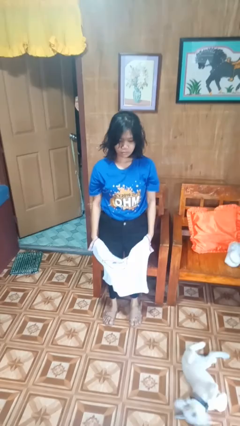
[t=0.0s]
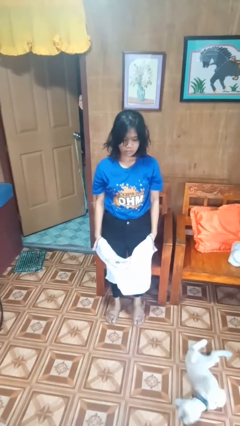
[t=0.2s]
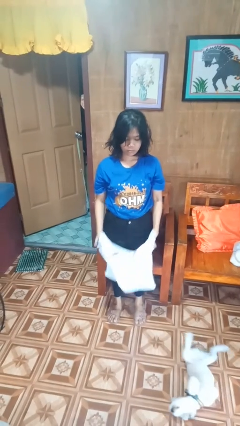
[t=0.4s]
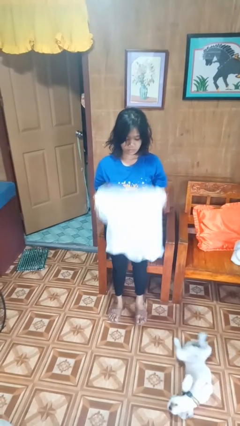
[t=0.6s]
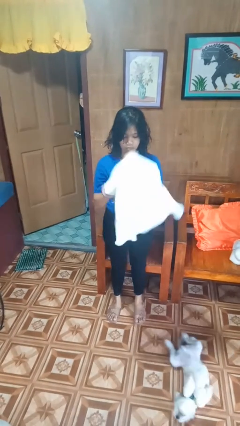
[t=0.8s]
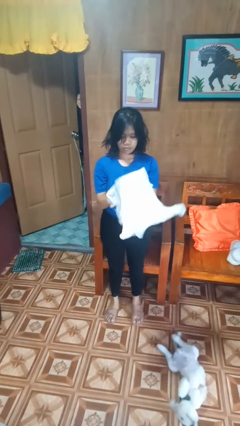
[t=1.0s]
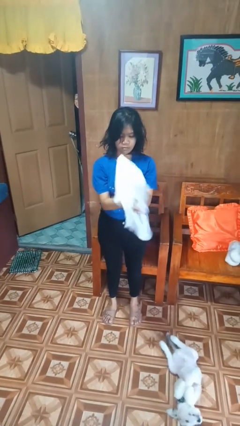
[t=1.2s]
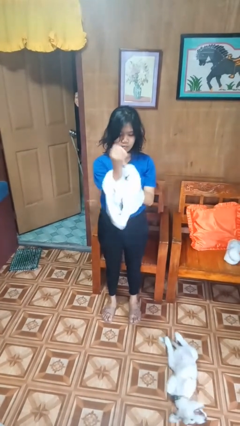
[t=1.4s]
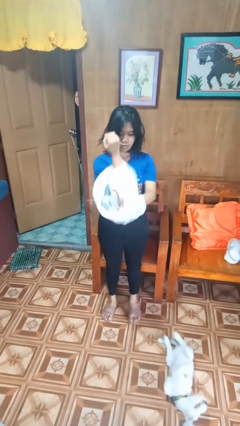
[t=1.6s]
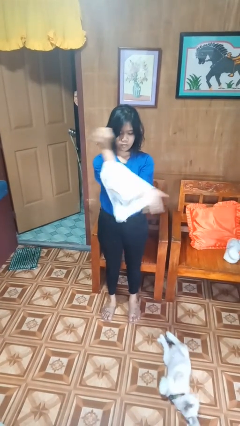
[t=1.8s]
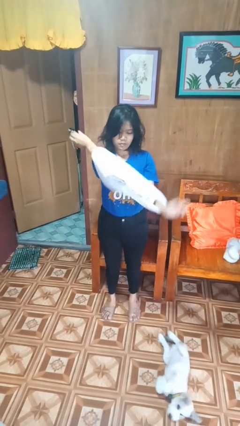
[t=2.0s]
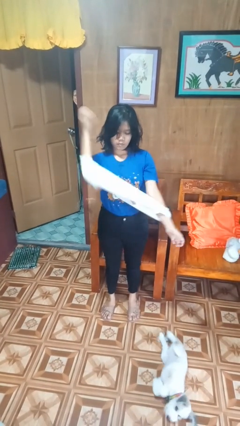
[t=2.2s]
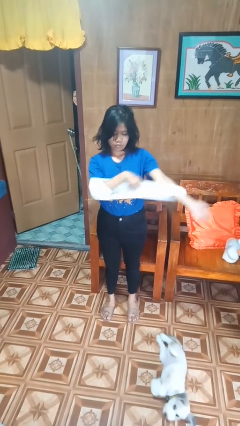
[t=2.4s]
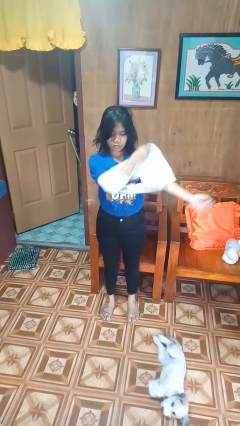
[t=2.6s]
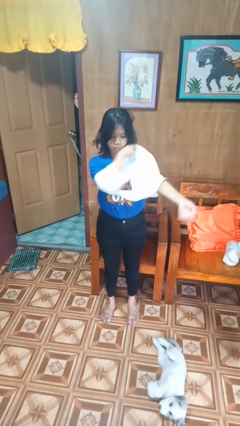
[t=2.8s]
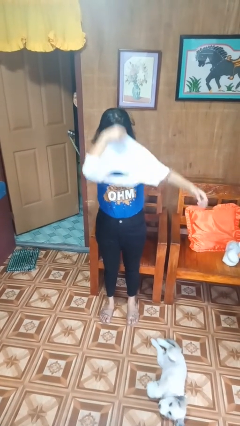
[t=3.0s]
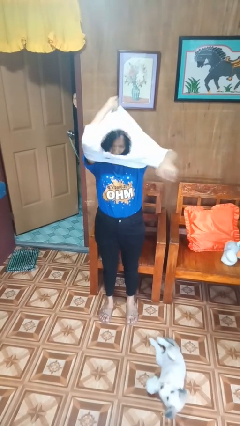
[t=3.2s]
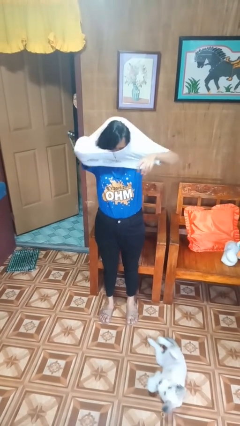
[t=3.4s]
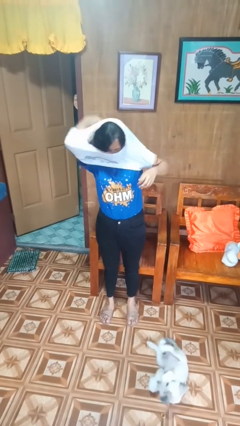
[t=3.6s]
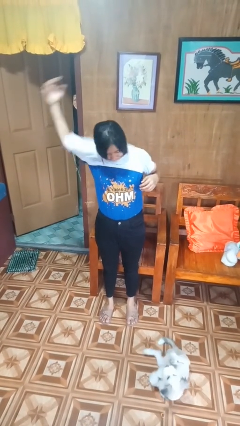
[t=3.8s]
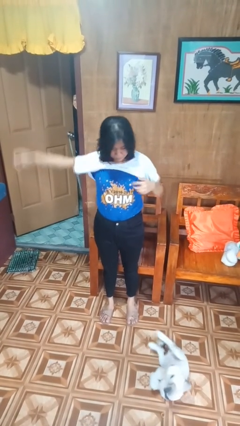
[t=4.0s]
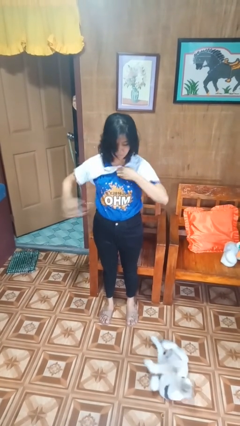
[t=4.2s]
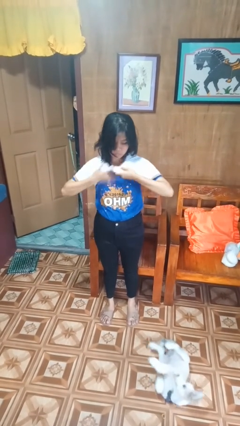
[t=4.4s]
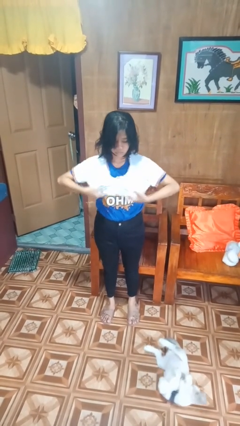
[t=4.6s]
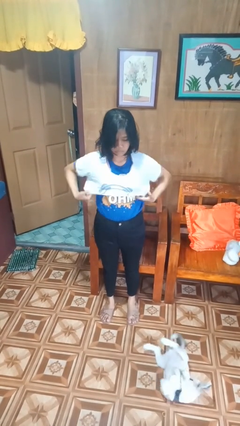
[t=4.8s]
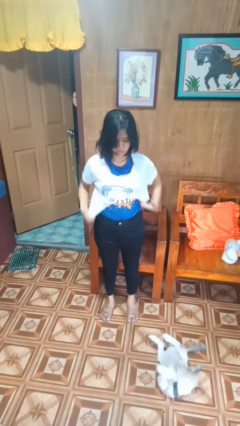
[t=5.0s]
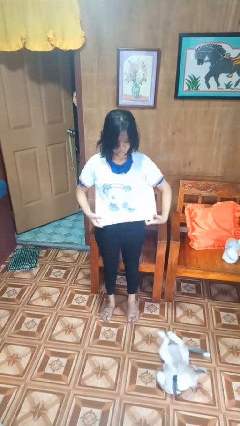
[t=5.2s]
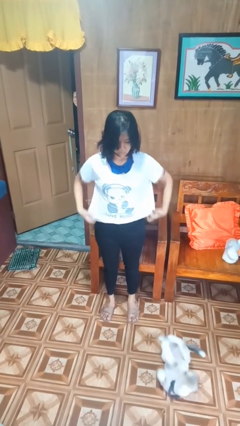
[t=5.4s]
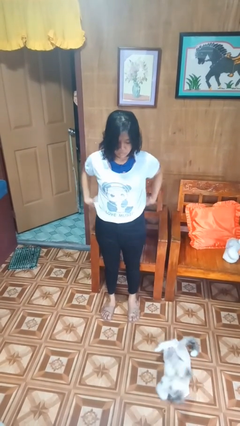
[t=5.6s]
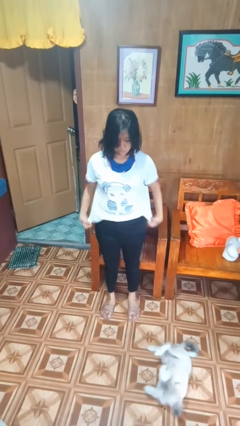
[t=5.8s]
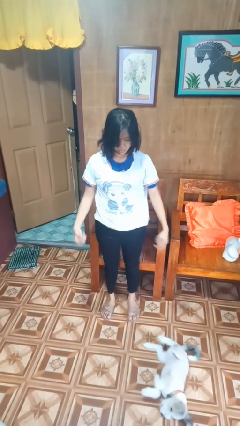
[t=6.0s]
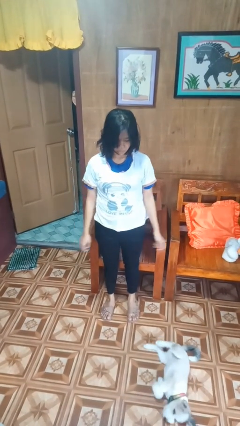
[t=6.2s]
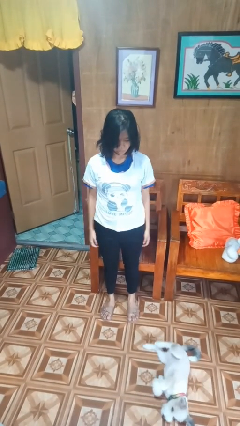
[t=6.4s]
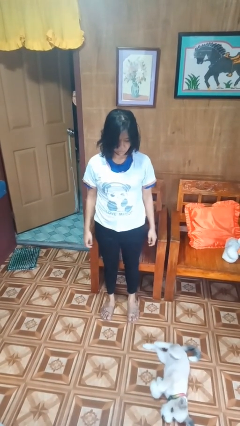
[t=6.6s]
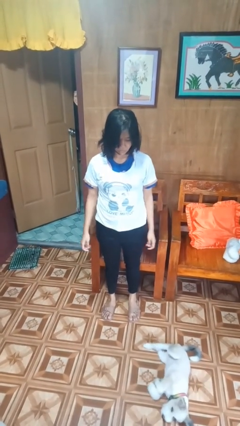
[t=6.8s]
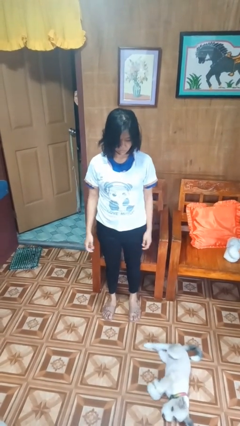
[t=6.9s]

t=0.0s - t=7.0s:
person puts on shirt

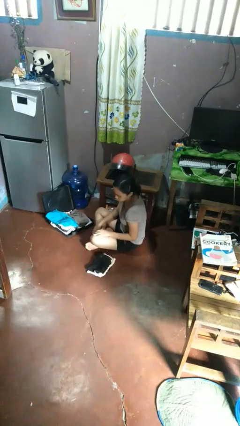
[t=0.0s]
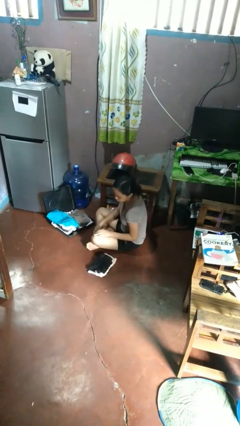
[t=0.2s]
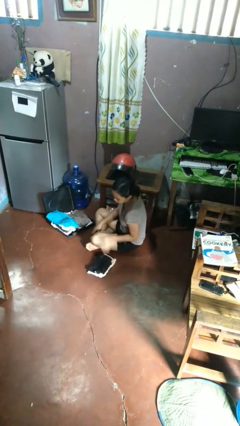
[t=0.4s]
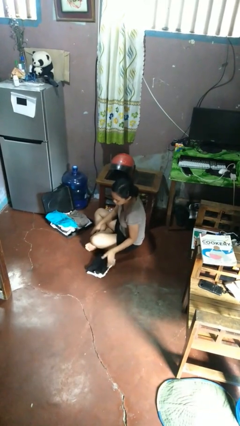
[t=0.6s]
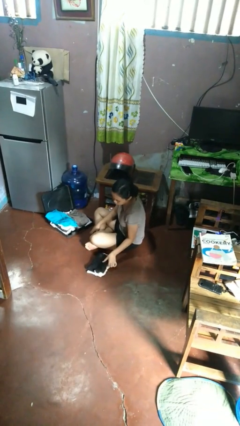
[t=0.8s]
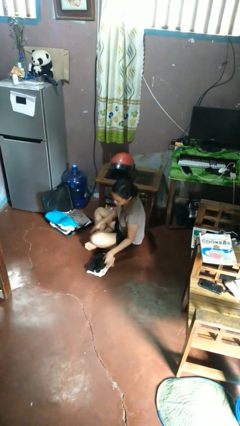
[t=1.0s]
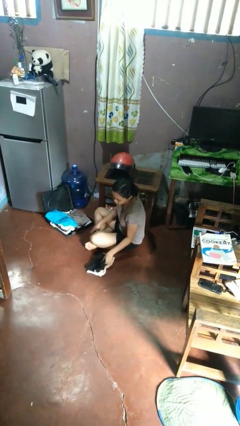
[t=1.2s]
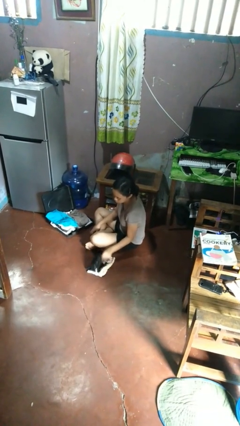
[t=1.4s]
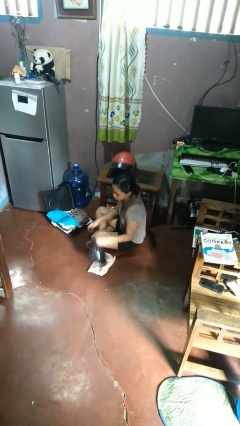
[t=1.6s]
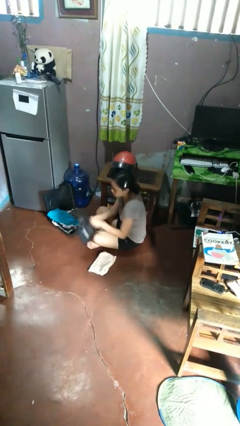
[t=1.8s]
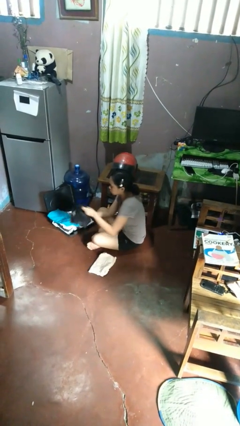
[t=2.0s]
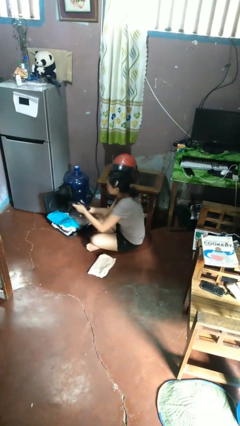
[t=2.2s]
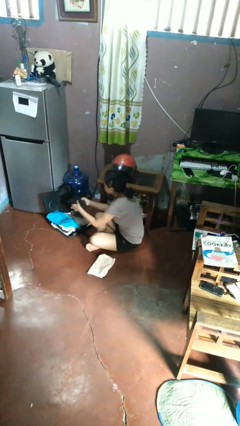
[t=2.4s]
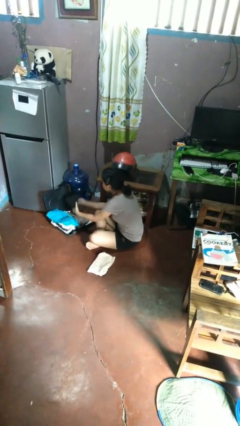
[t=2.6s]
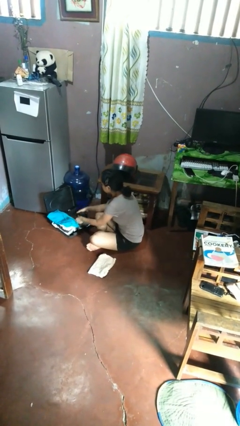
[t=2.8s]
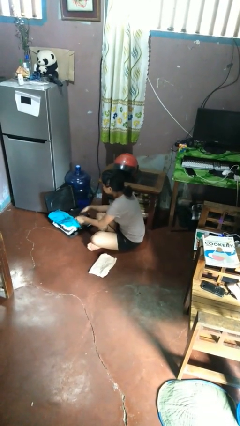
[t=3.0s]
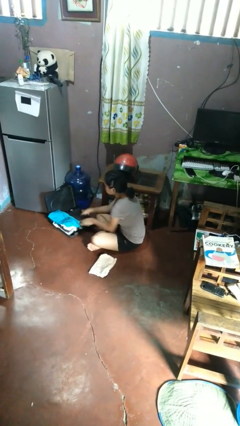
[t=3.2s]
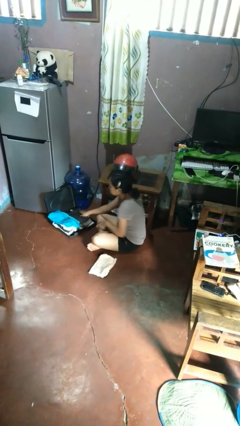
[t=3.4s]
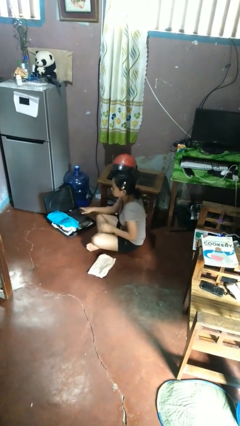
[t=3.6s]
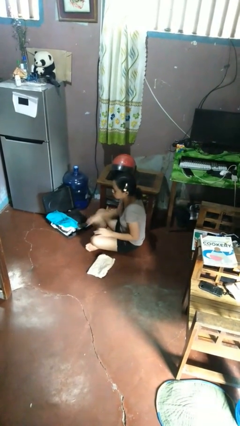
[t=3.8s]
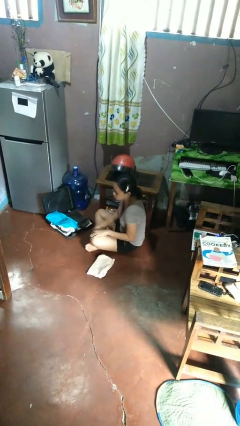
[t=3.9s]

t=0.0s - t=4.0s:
person loads clothes into suitcase

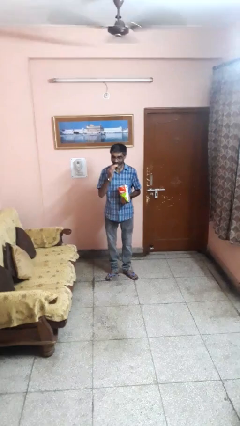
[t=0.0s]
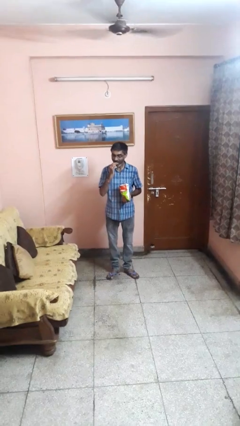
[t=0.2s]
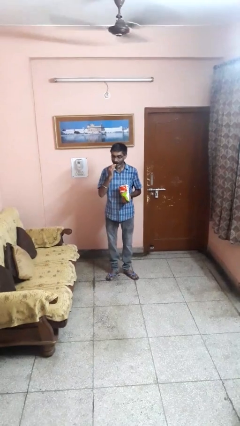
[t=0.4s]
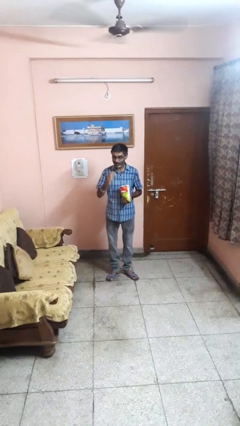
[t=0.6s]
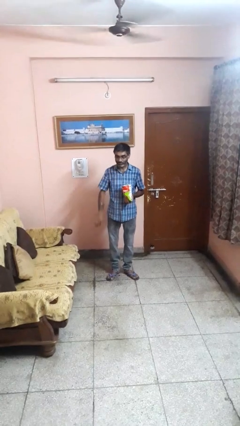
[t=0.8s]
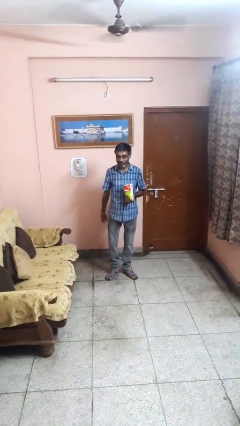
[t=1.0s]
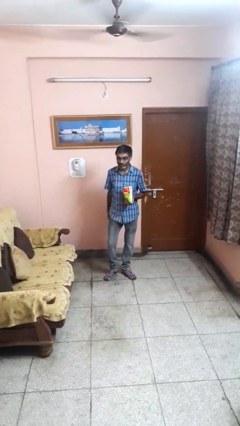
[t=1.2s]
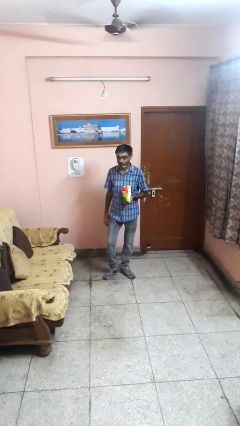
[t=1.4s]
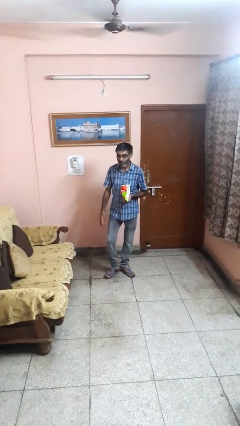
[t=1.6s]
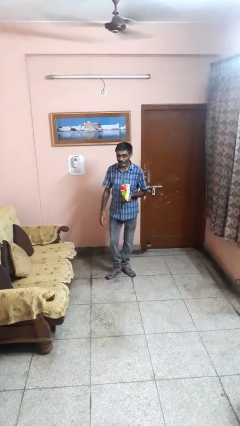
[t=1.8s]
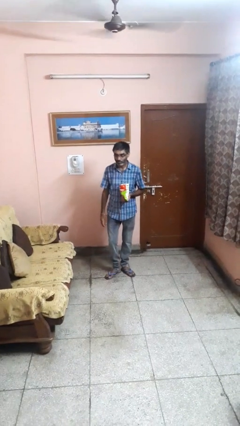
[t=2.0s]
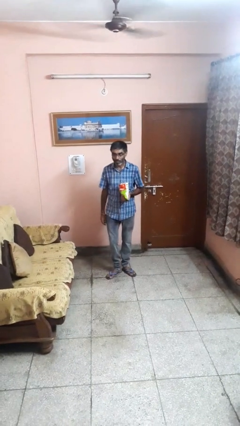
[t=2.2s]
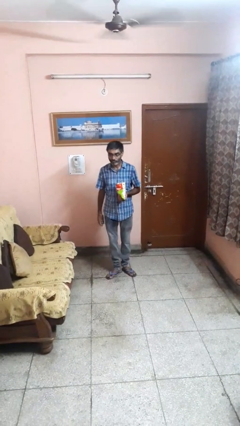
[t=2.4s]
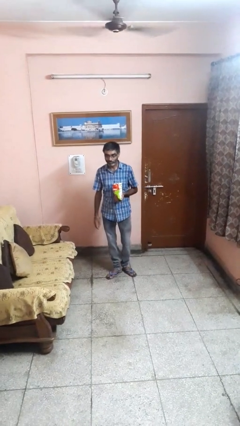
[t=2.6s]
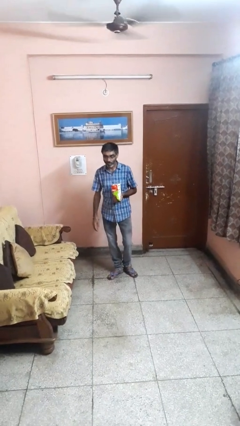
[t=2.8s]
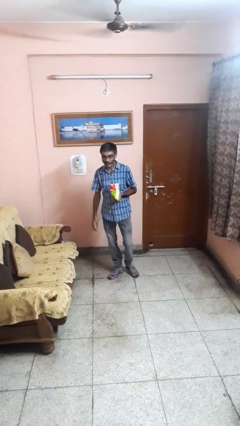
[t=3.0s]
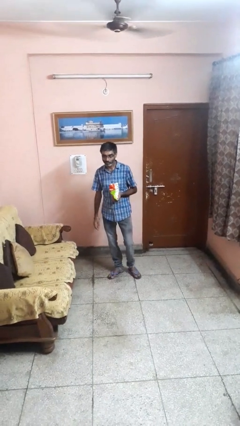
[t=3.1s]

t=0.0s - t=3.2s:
person eats snack from bag

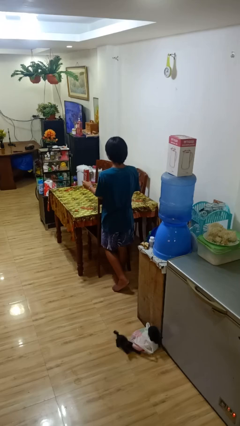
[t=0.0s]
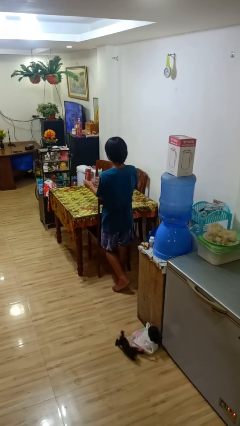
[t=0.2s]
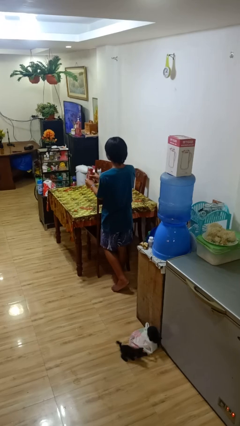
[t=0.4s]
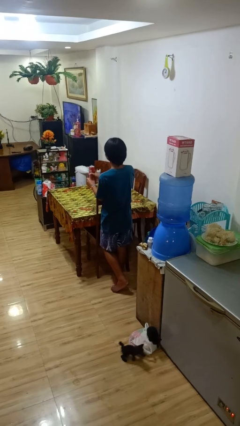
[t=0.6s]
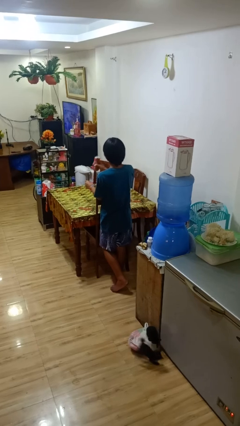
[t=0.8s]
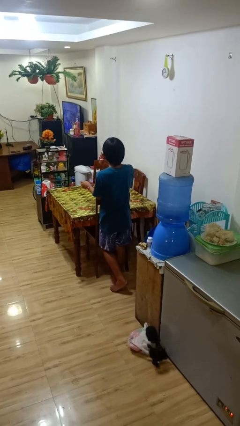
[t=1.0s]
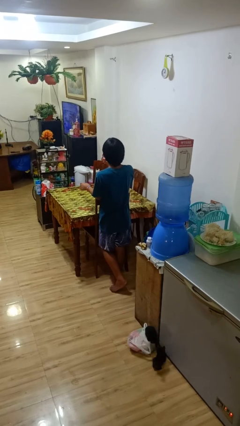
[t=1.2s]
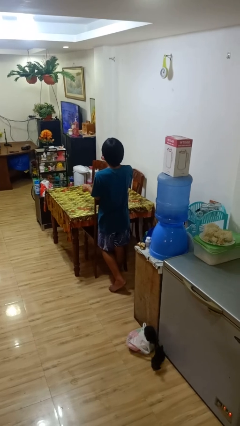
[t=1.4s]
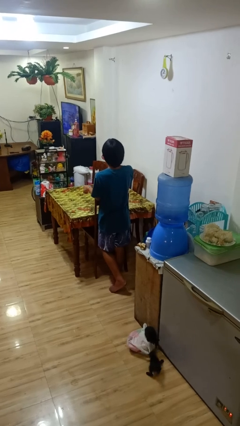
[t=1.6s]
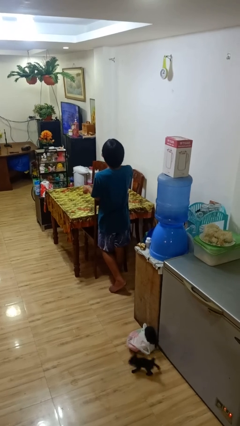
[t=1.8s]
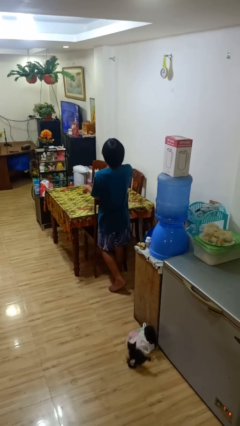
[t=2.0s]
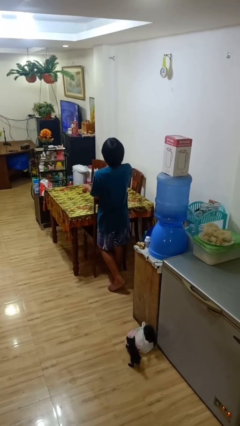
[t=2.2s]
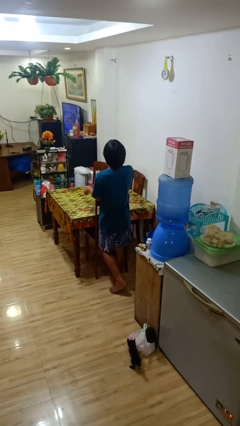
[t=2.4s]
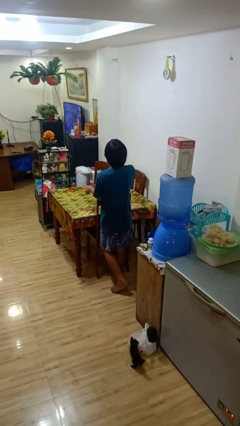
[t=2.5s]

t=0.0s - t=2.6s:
person drinks from beverage can

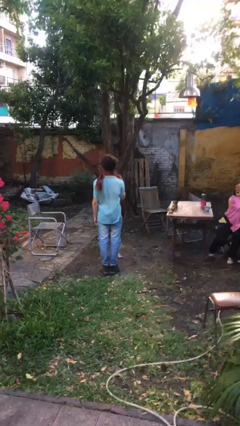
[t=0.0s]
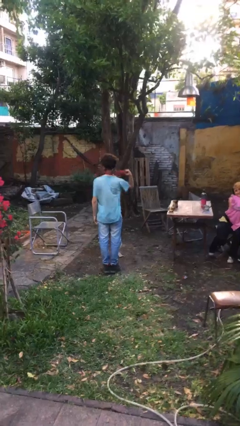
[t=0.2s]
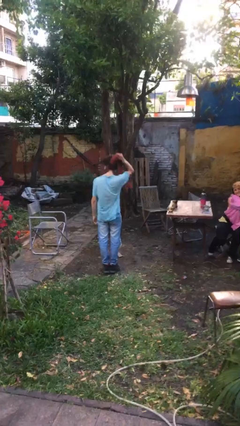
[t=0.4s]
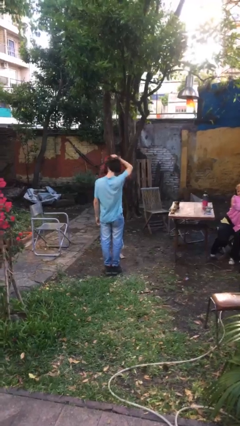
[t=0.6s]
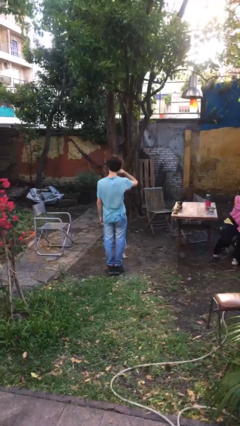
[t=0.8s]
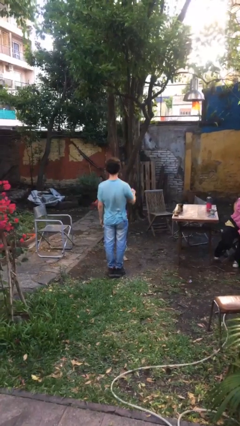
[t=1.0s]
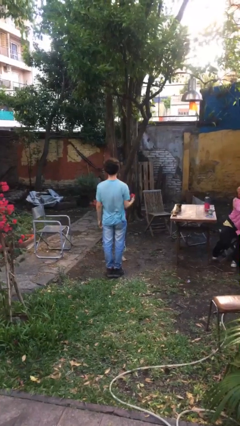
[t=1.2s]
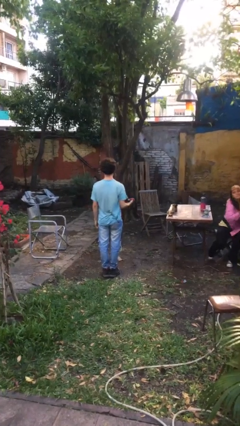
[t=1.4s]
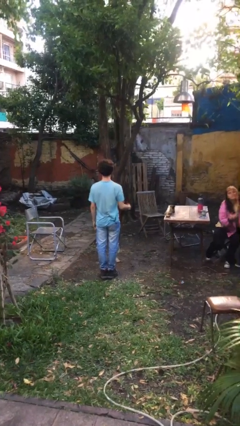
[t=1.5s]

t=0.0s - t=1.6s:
person takes off scarf
